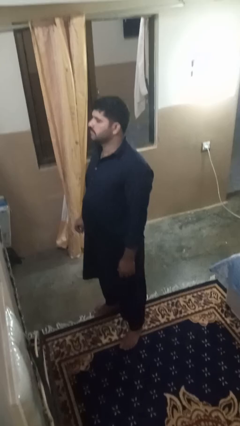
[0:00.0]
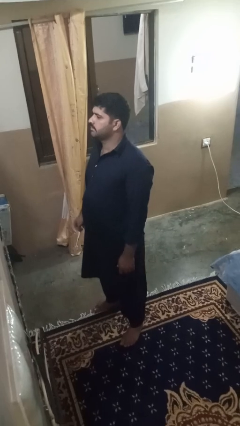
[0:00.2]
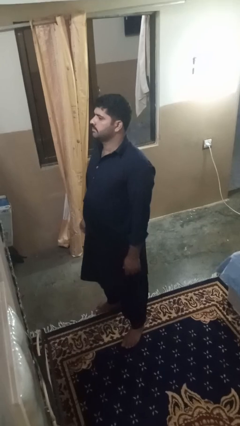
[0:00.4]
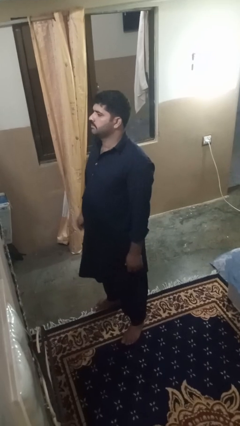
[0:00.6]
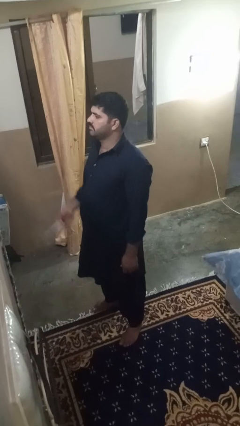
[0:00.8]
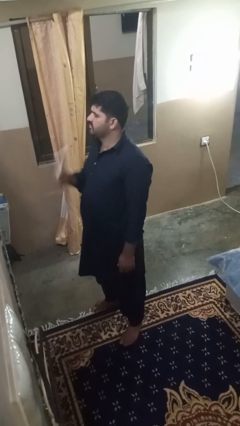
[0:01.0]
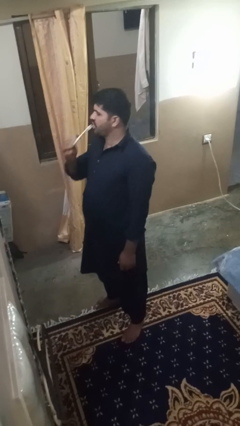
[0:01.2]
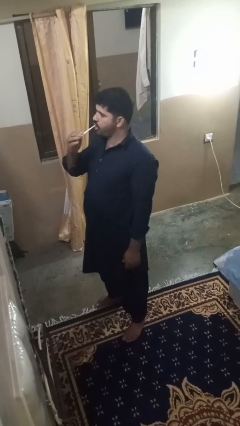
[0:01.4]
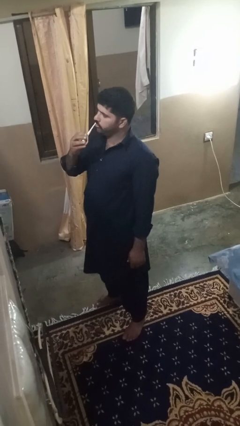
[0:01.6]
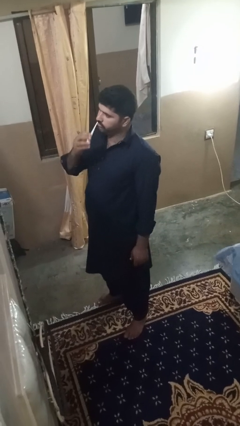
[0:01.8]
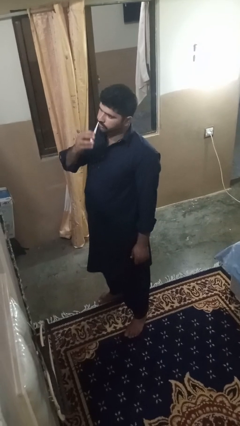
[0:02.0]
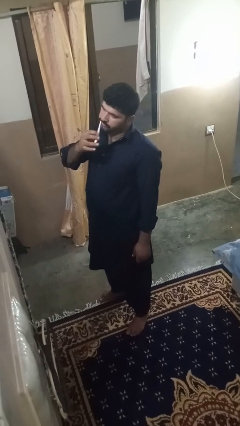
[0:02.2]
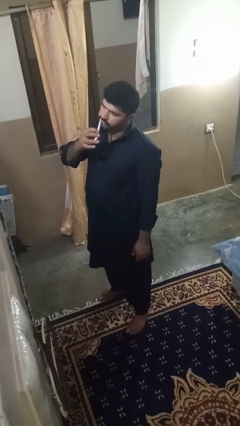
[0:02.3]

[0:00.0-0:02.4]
person brushes teeth

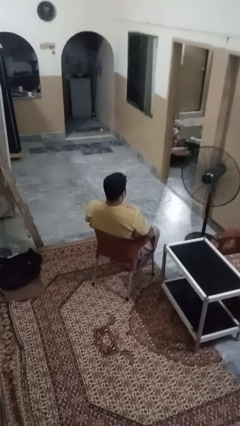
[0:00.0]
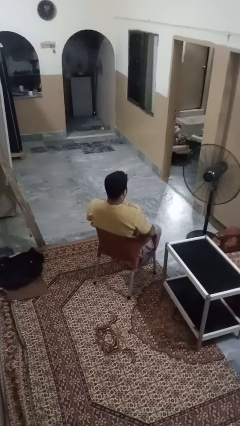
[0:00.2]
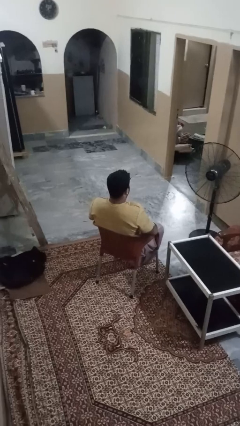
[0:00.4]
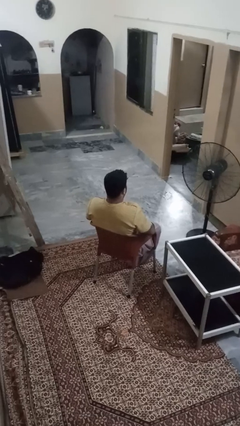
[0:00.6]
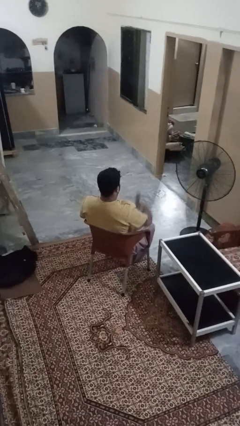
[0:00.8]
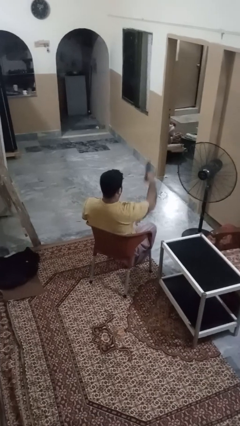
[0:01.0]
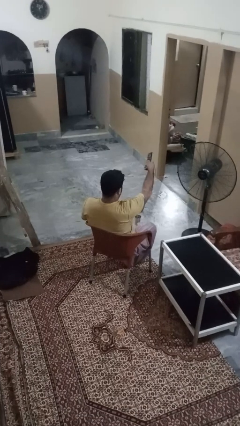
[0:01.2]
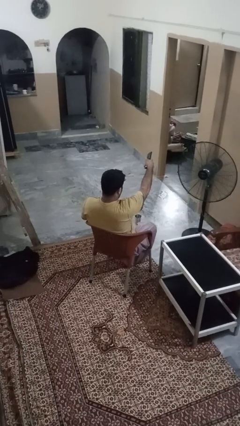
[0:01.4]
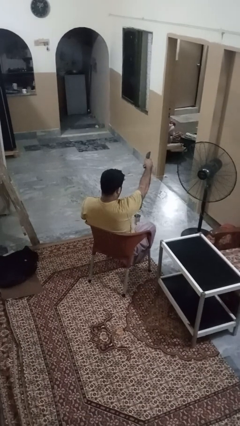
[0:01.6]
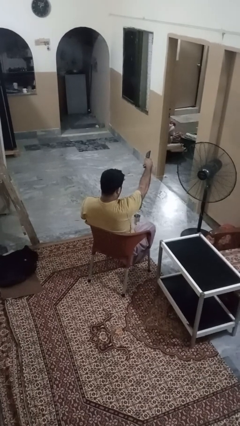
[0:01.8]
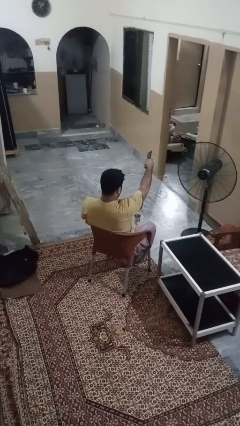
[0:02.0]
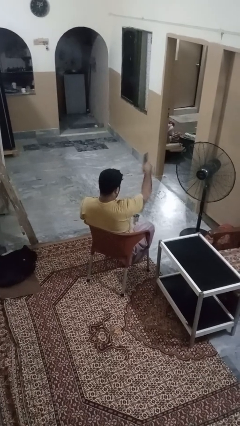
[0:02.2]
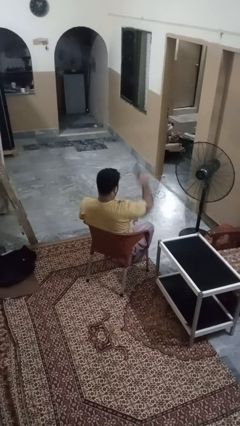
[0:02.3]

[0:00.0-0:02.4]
person uses television remote

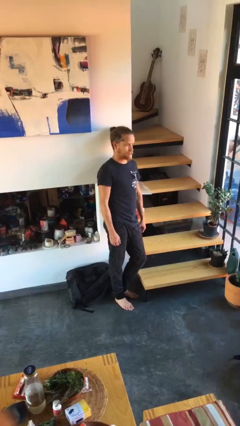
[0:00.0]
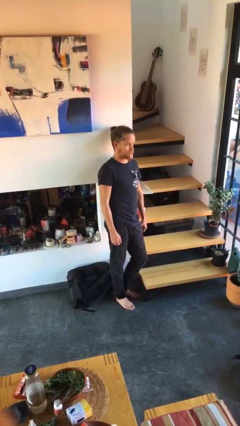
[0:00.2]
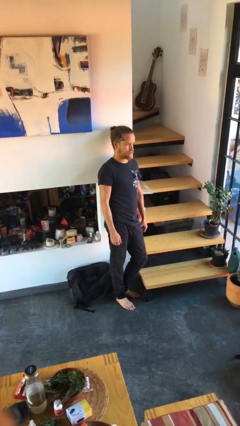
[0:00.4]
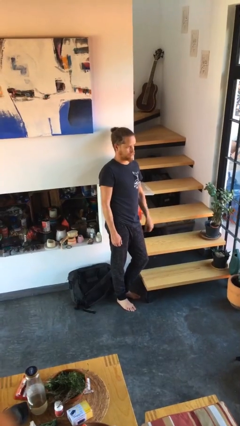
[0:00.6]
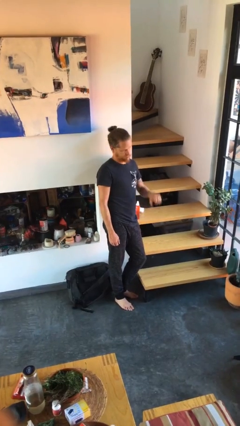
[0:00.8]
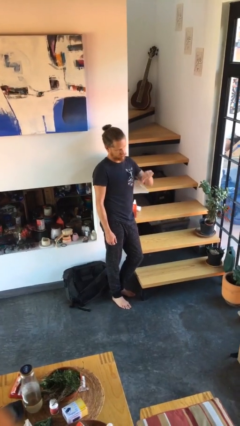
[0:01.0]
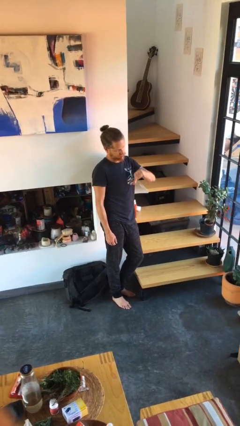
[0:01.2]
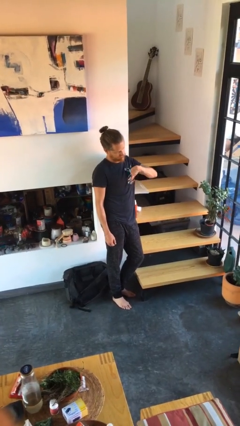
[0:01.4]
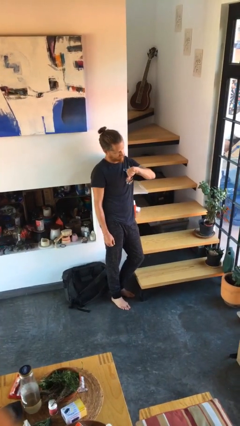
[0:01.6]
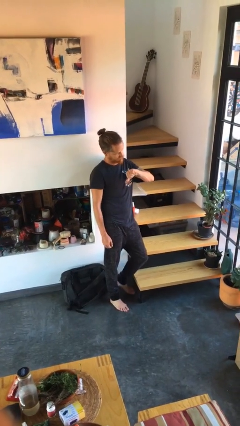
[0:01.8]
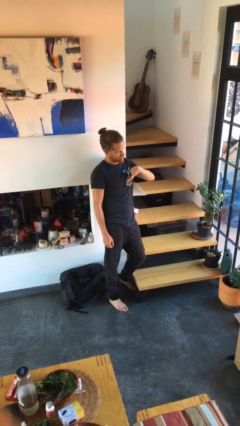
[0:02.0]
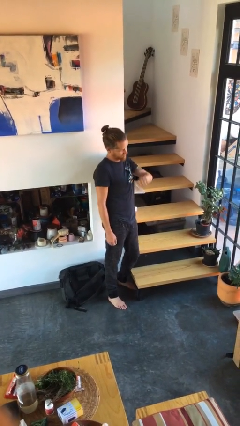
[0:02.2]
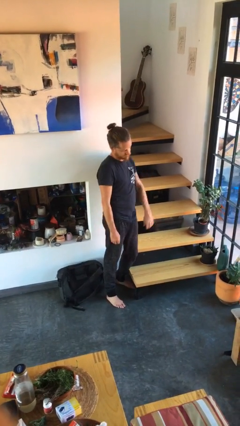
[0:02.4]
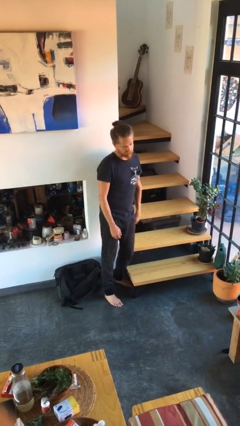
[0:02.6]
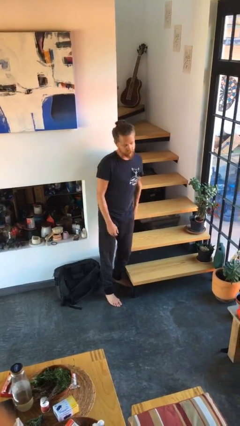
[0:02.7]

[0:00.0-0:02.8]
person gestures thumbs down

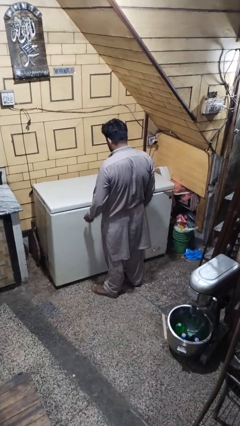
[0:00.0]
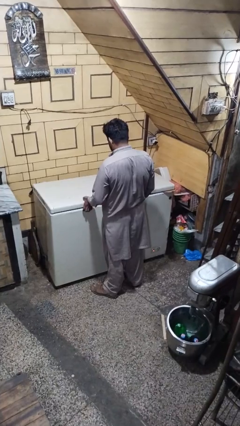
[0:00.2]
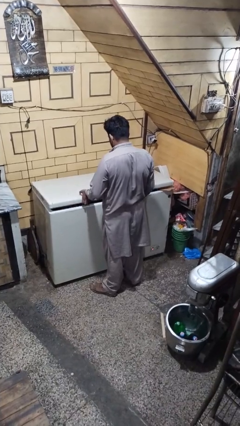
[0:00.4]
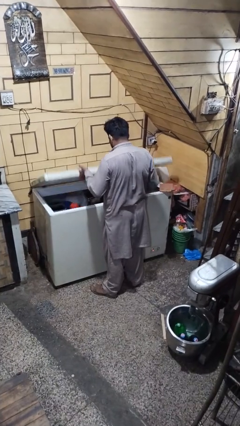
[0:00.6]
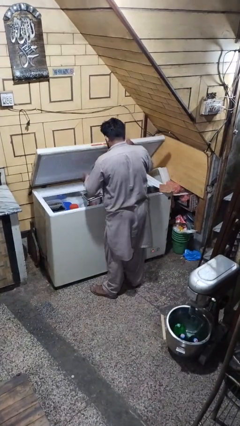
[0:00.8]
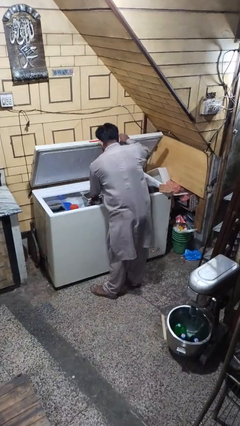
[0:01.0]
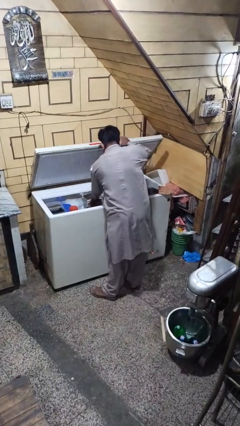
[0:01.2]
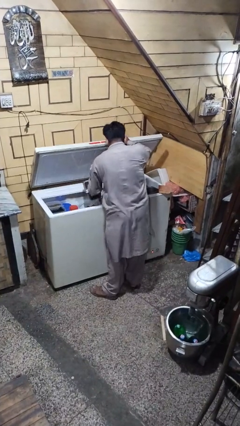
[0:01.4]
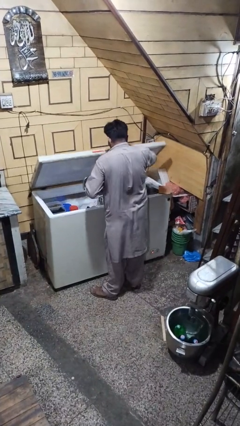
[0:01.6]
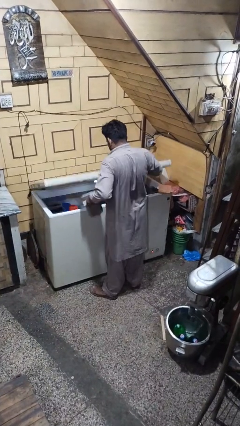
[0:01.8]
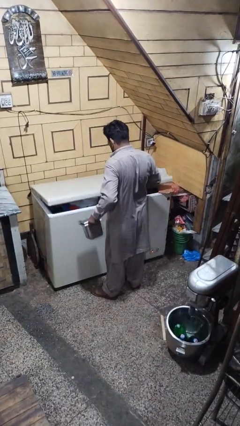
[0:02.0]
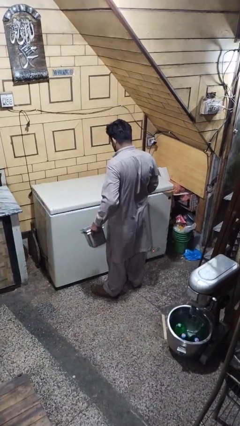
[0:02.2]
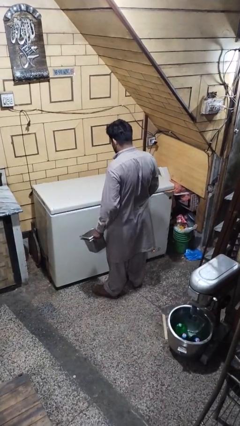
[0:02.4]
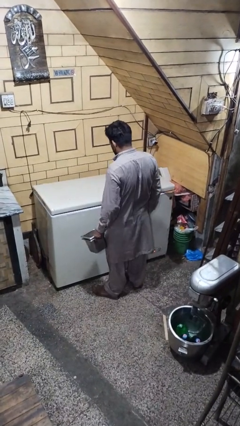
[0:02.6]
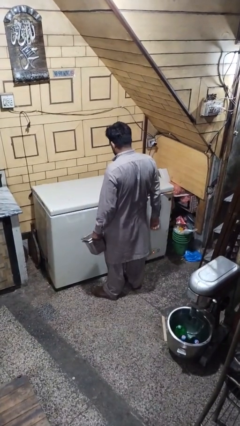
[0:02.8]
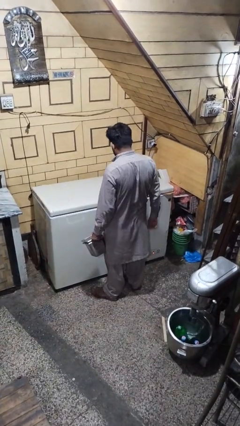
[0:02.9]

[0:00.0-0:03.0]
person takes object from refrigerator

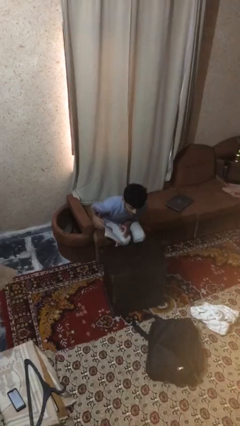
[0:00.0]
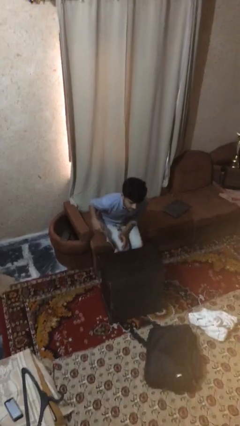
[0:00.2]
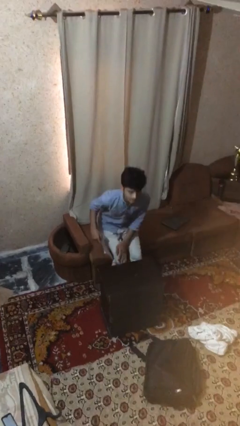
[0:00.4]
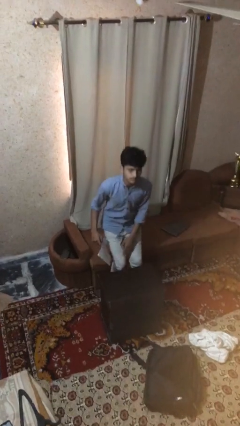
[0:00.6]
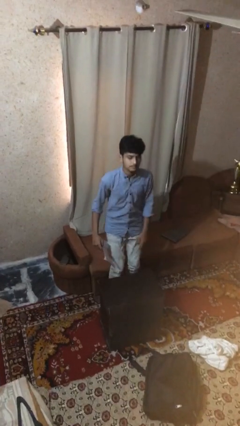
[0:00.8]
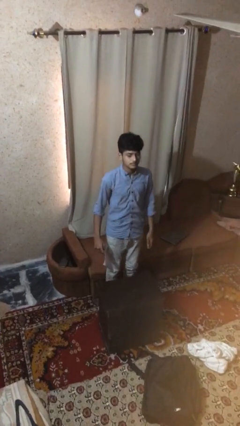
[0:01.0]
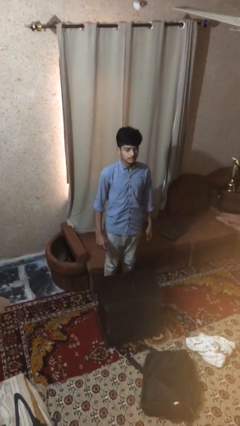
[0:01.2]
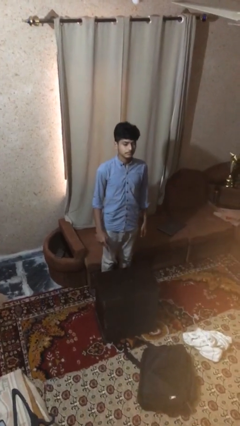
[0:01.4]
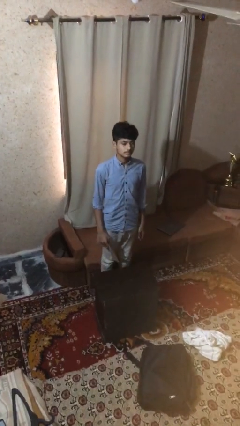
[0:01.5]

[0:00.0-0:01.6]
person stands up

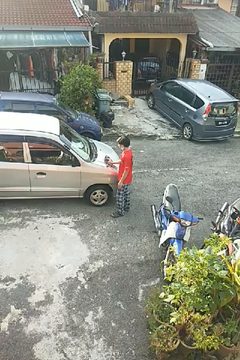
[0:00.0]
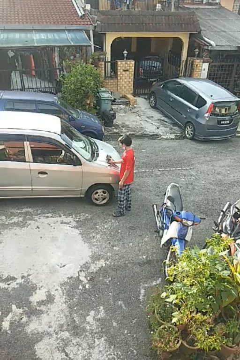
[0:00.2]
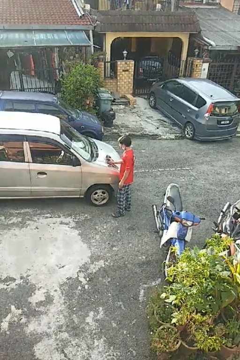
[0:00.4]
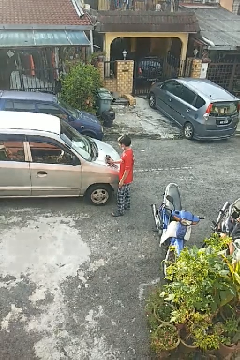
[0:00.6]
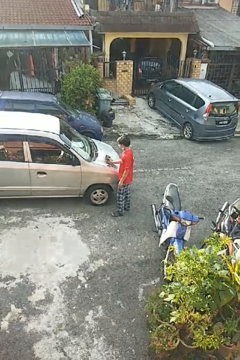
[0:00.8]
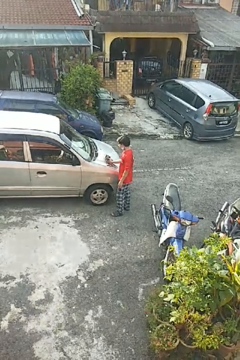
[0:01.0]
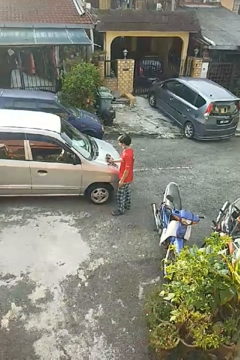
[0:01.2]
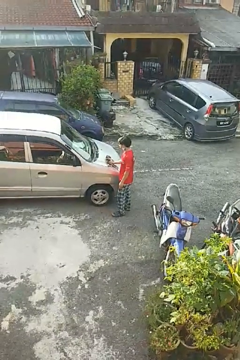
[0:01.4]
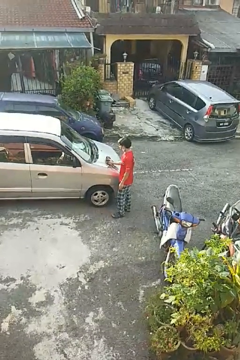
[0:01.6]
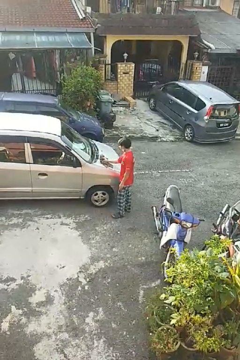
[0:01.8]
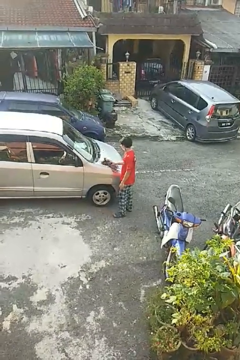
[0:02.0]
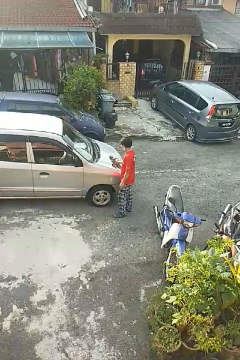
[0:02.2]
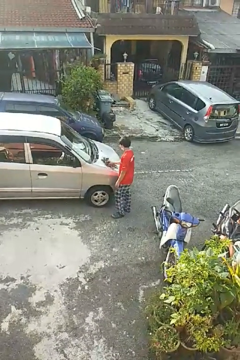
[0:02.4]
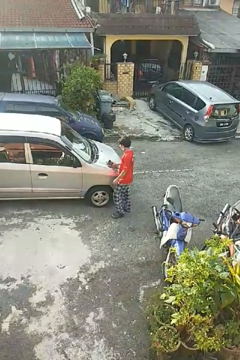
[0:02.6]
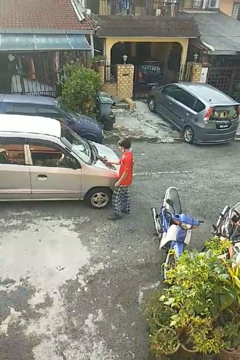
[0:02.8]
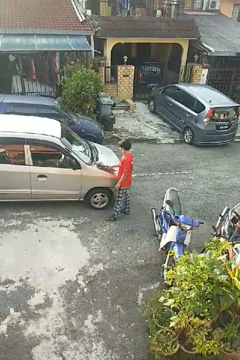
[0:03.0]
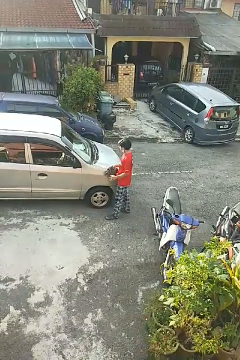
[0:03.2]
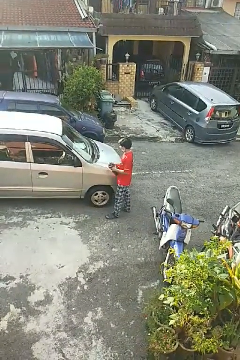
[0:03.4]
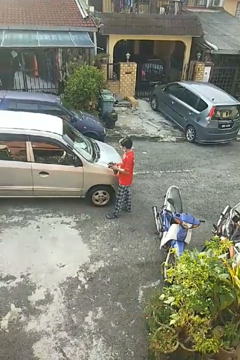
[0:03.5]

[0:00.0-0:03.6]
person polishes car with rag

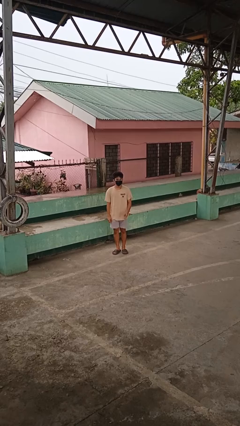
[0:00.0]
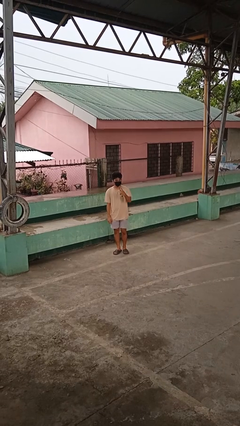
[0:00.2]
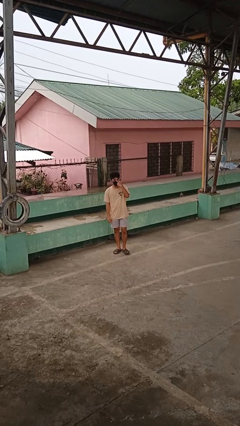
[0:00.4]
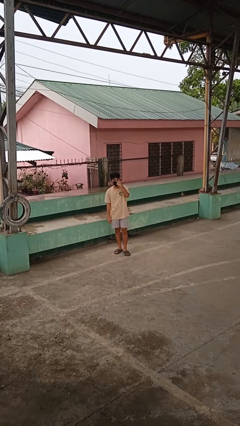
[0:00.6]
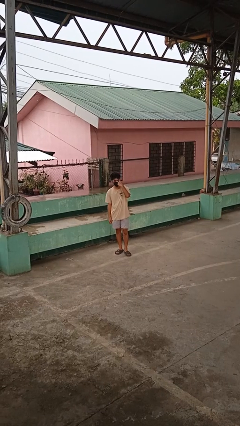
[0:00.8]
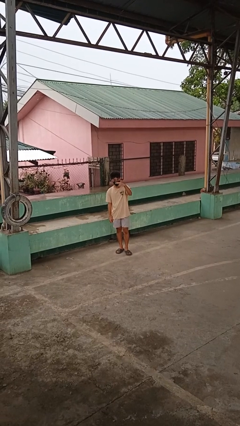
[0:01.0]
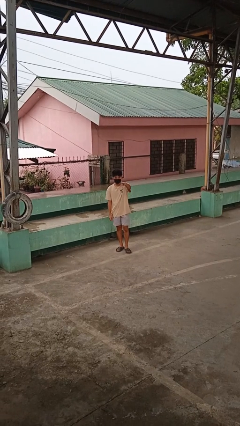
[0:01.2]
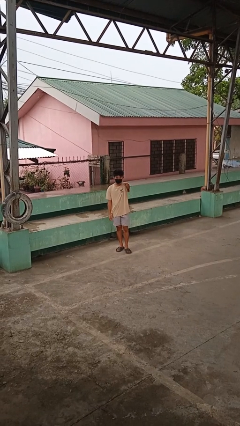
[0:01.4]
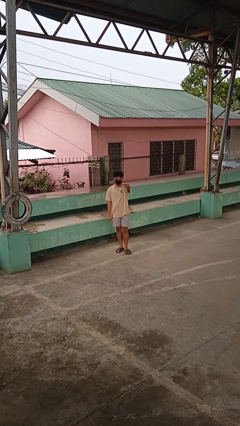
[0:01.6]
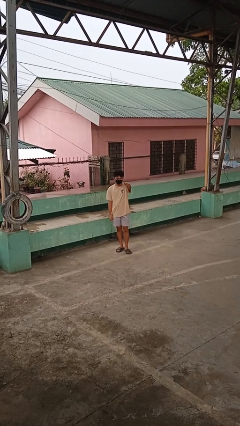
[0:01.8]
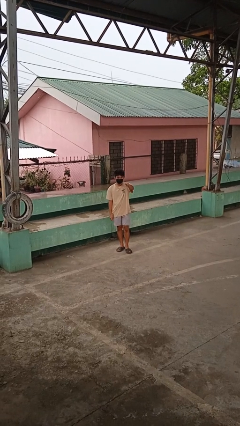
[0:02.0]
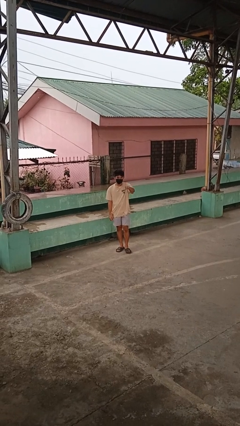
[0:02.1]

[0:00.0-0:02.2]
person gestures watch closely
